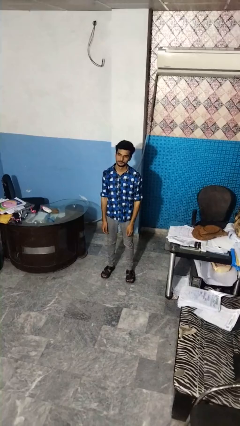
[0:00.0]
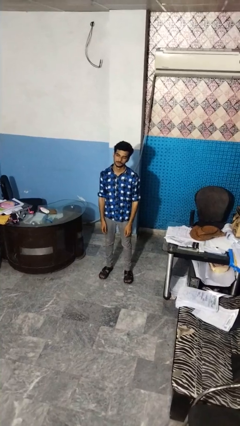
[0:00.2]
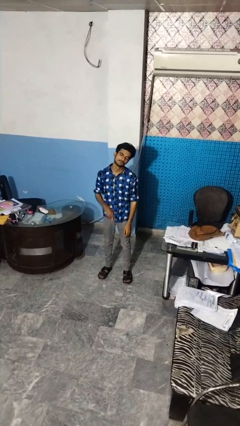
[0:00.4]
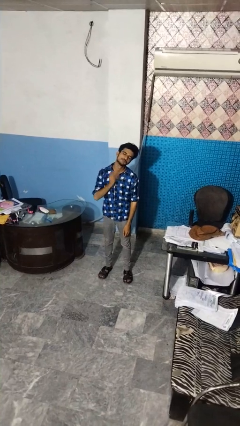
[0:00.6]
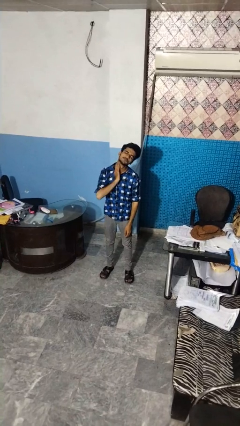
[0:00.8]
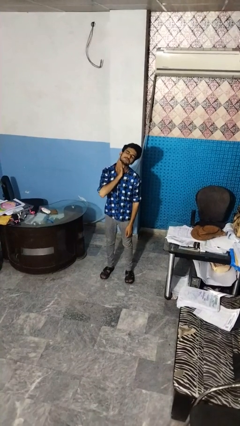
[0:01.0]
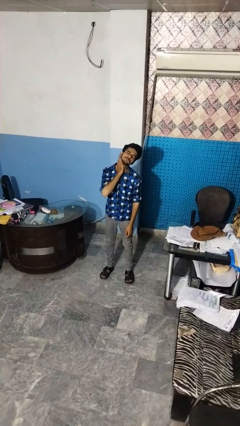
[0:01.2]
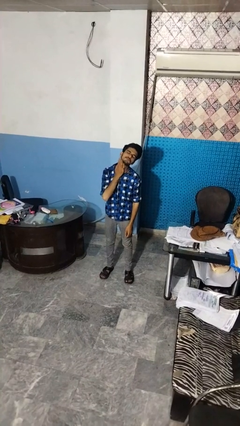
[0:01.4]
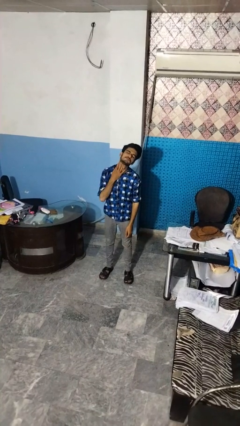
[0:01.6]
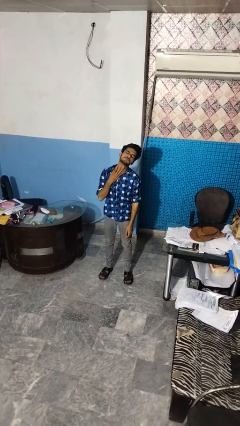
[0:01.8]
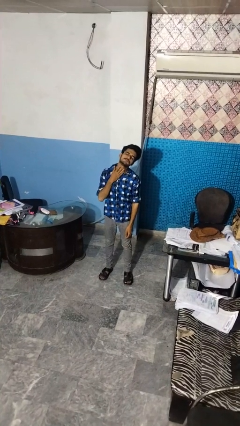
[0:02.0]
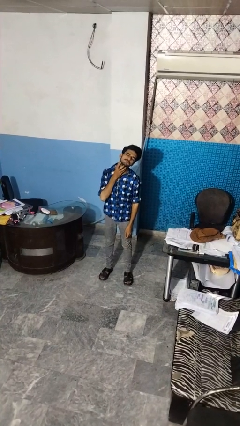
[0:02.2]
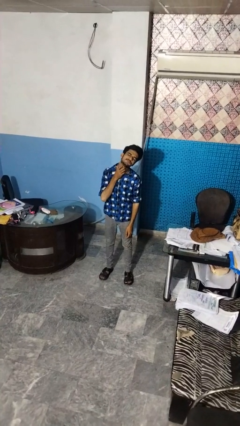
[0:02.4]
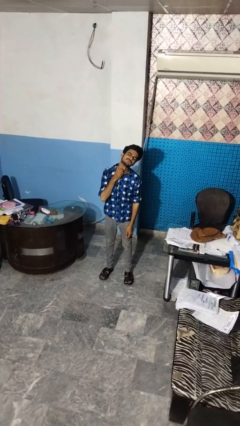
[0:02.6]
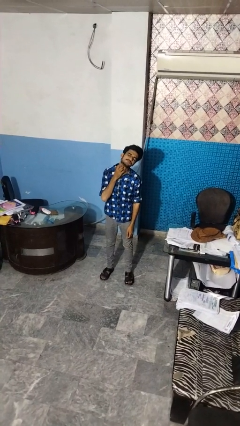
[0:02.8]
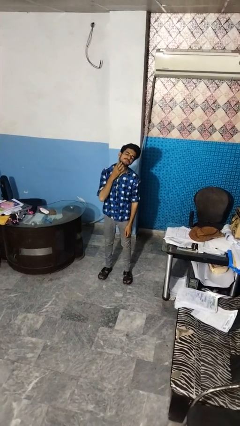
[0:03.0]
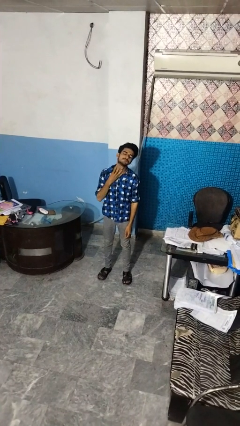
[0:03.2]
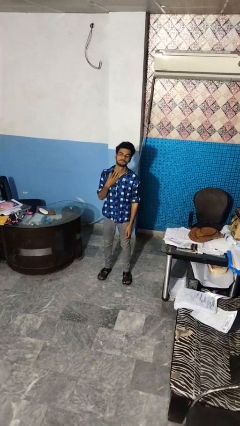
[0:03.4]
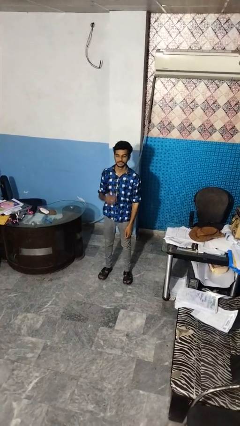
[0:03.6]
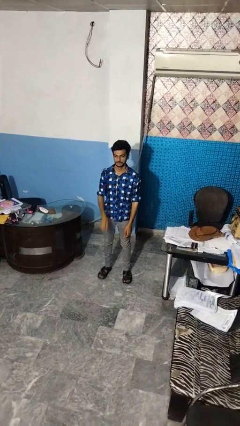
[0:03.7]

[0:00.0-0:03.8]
person rubs neck

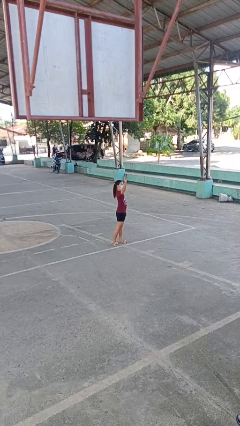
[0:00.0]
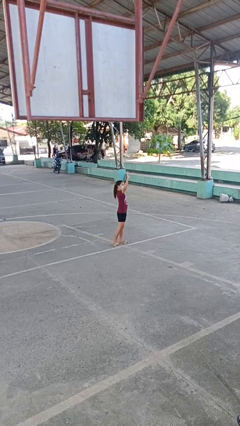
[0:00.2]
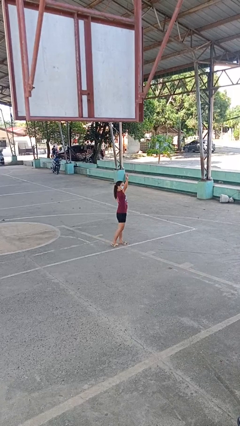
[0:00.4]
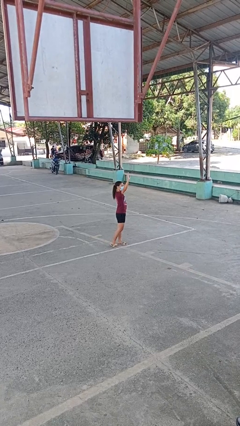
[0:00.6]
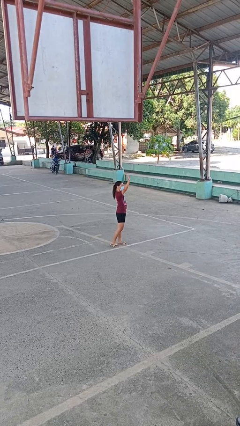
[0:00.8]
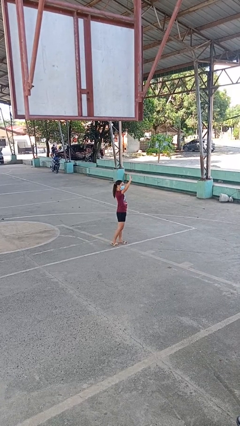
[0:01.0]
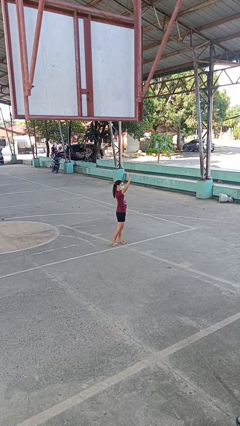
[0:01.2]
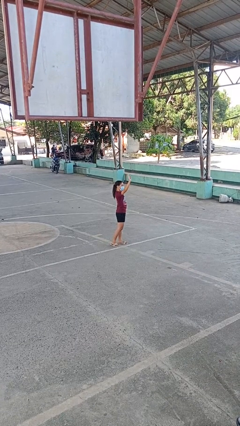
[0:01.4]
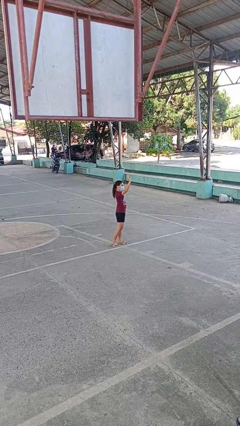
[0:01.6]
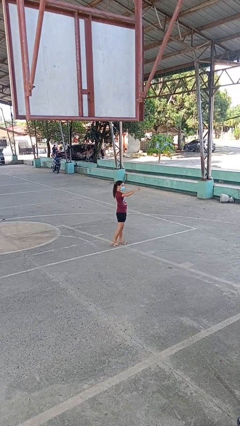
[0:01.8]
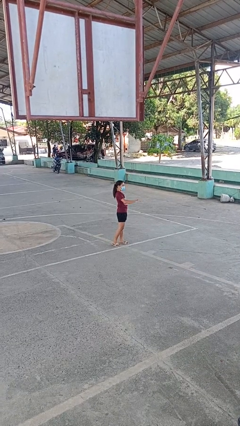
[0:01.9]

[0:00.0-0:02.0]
person waves at person

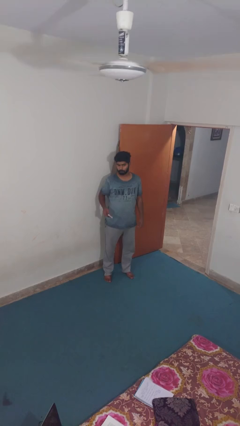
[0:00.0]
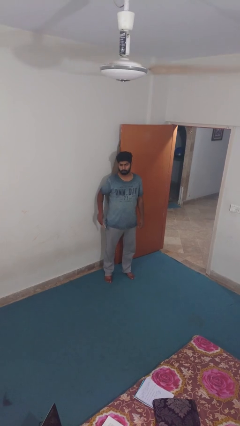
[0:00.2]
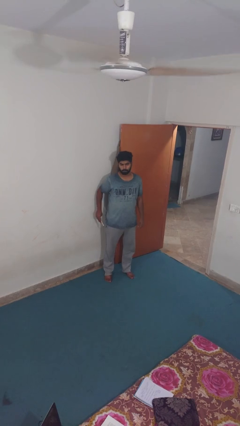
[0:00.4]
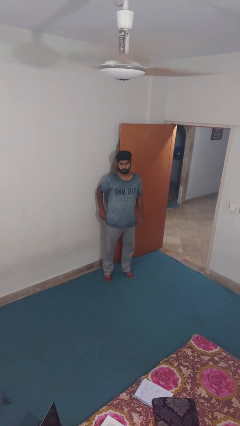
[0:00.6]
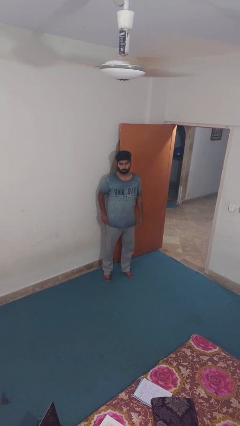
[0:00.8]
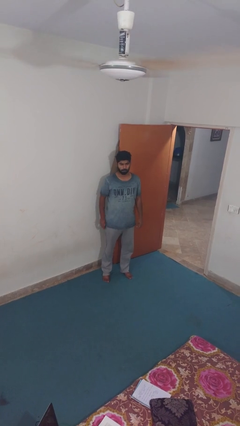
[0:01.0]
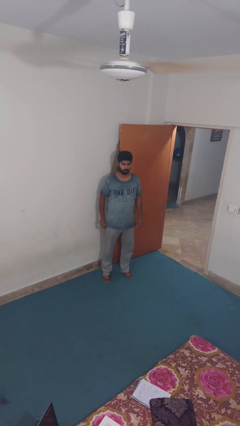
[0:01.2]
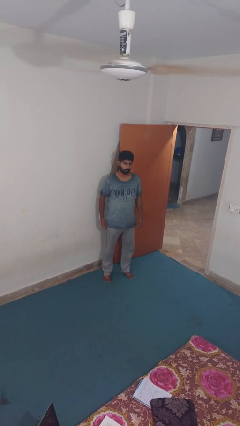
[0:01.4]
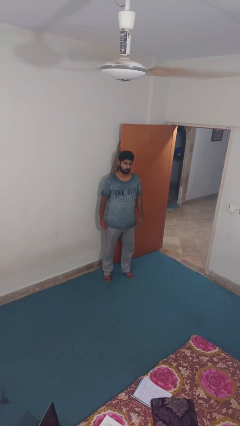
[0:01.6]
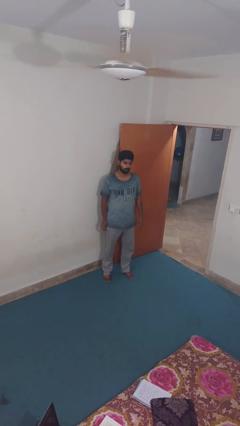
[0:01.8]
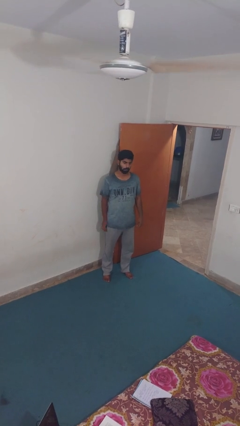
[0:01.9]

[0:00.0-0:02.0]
person puts phone into pocket

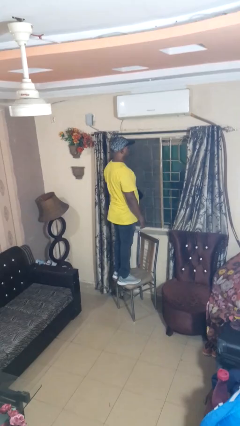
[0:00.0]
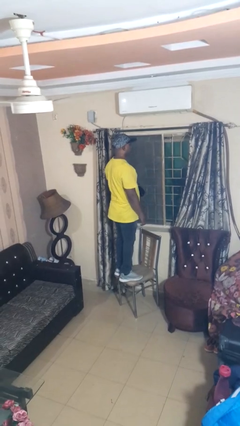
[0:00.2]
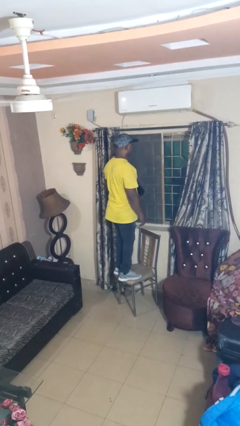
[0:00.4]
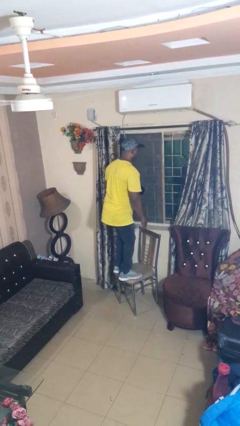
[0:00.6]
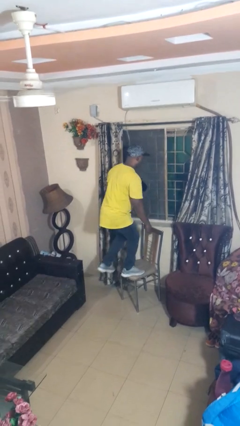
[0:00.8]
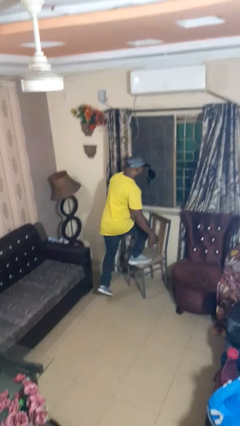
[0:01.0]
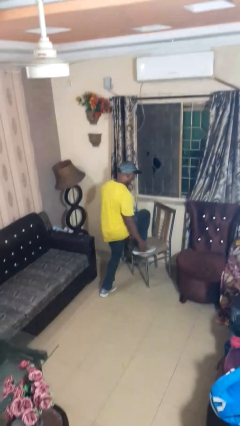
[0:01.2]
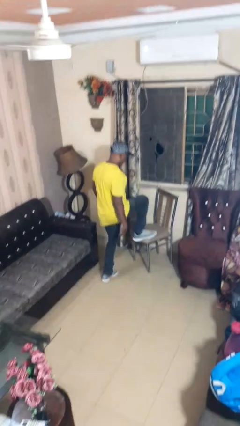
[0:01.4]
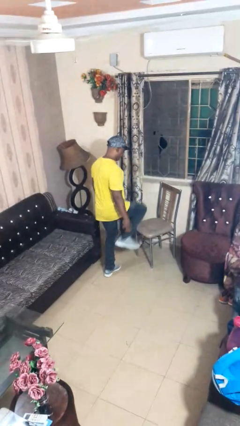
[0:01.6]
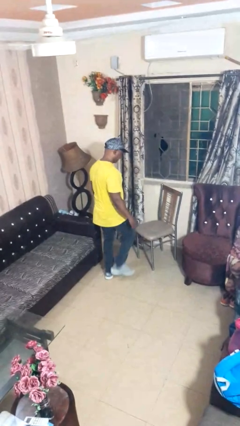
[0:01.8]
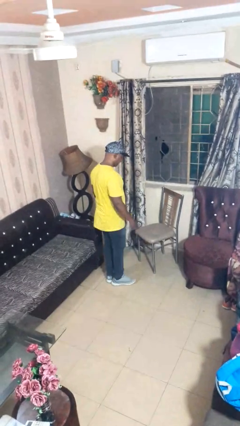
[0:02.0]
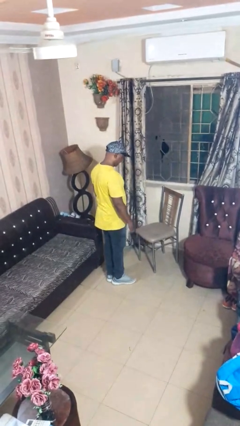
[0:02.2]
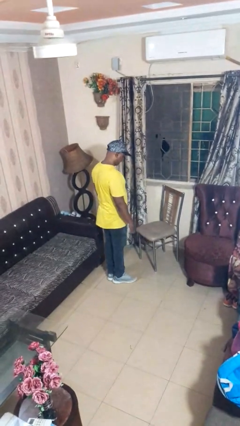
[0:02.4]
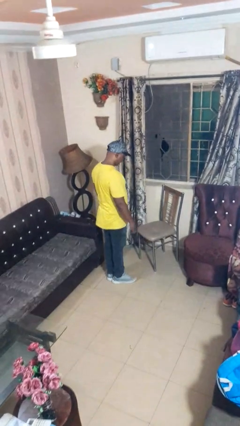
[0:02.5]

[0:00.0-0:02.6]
person climbs off chair

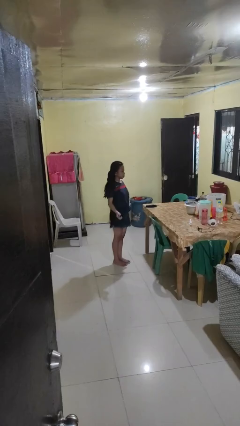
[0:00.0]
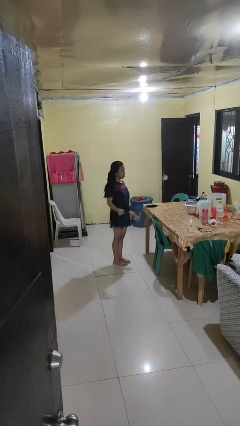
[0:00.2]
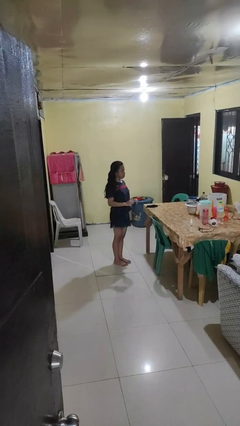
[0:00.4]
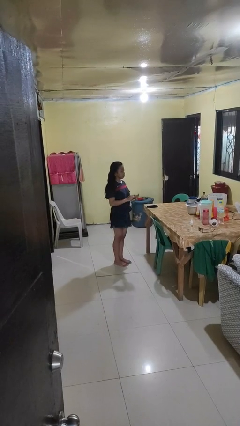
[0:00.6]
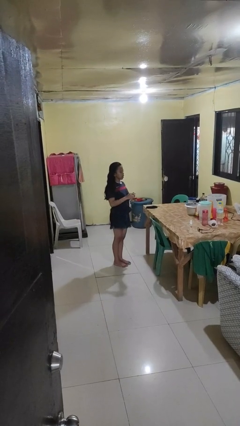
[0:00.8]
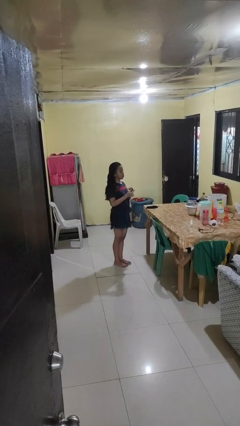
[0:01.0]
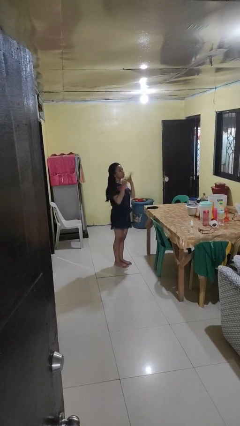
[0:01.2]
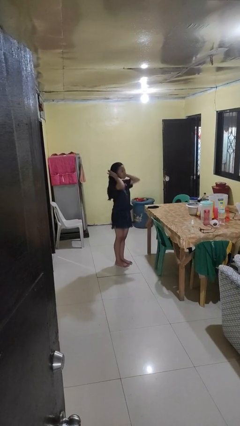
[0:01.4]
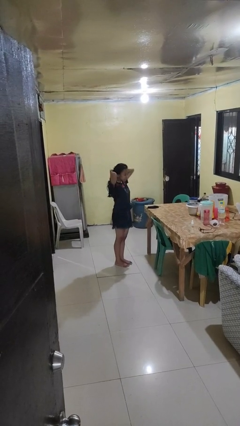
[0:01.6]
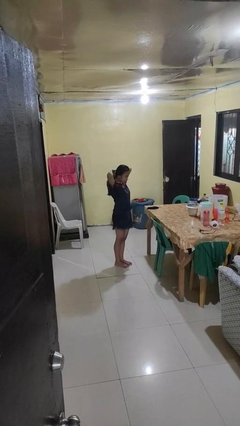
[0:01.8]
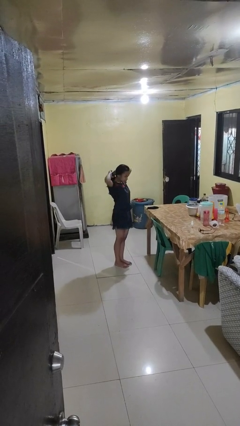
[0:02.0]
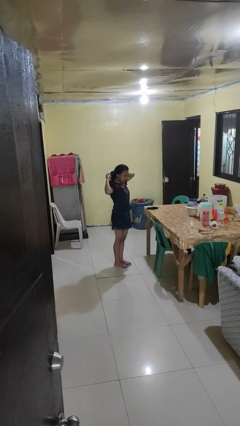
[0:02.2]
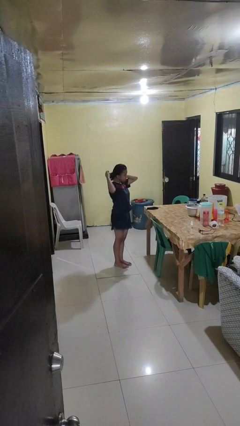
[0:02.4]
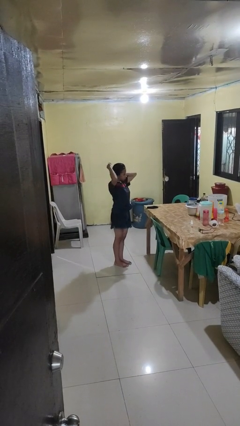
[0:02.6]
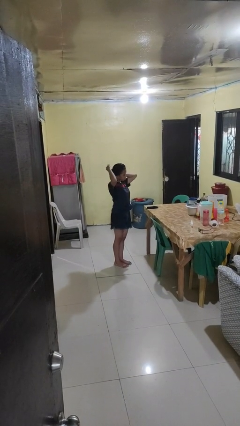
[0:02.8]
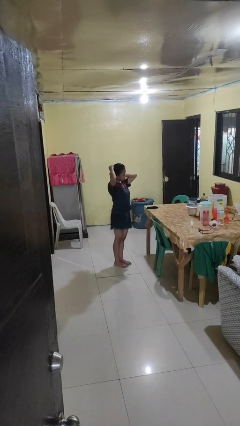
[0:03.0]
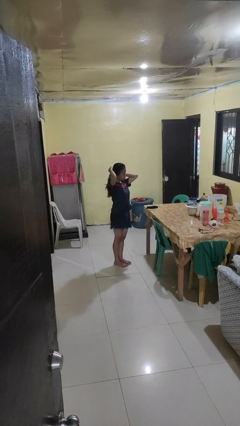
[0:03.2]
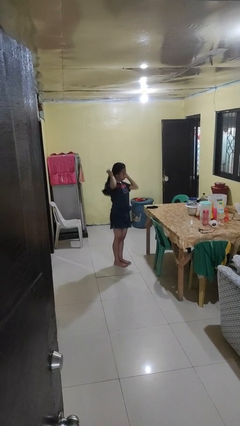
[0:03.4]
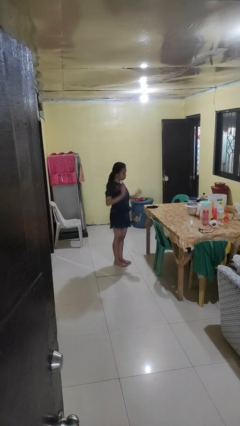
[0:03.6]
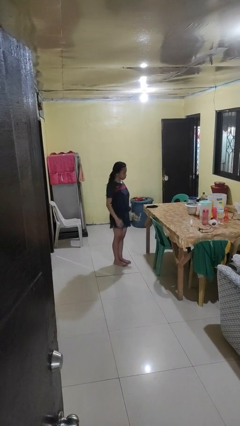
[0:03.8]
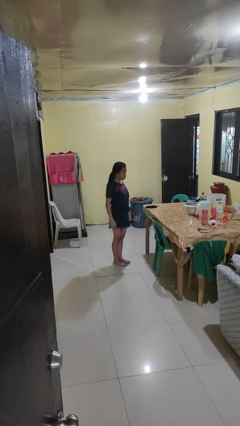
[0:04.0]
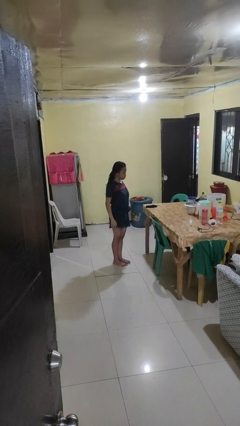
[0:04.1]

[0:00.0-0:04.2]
person puts hair in ponytail

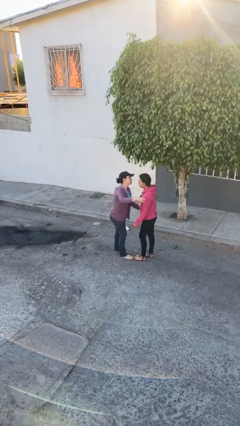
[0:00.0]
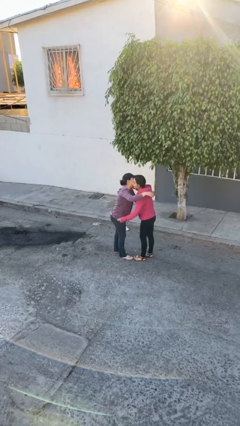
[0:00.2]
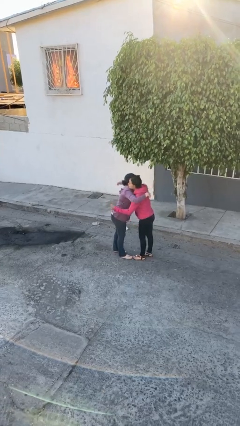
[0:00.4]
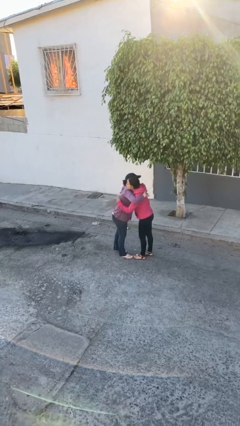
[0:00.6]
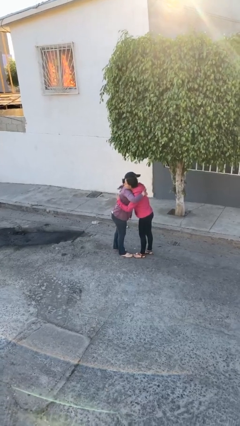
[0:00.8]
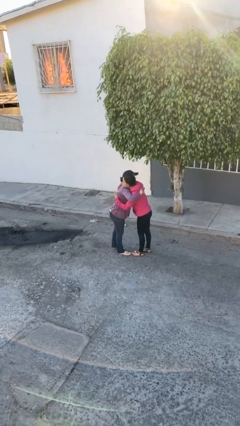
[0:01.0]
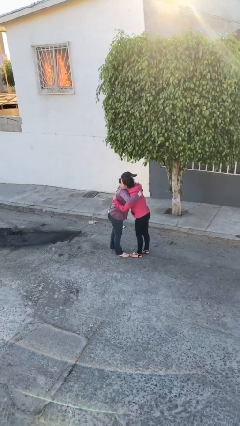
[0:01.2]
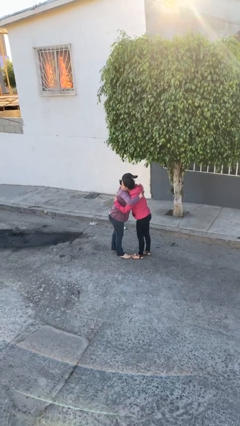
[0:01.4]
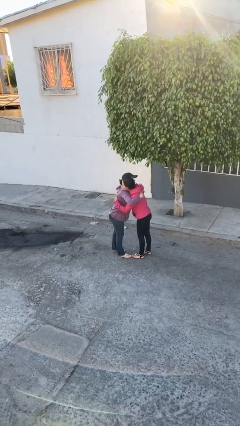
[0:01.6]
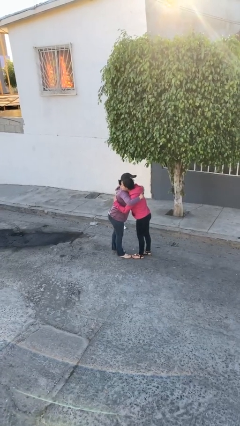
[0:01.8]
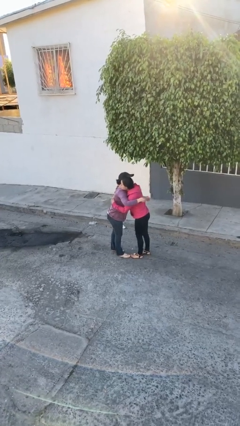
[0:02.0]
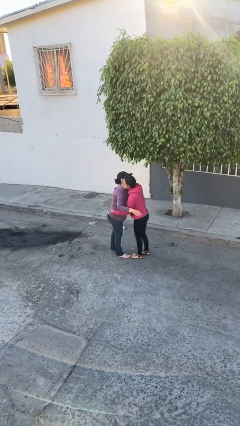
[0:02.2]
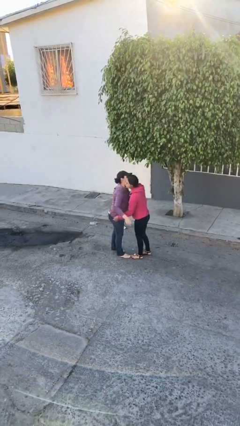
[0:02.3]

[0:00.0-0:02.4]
person embraces person

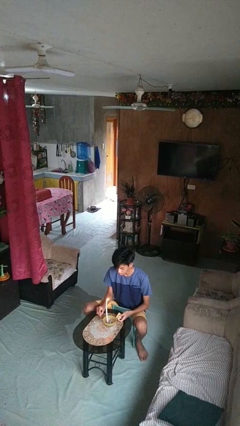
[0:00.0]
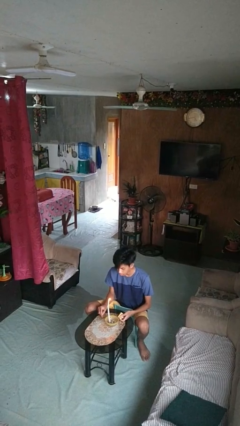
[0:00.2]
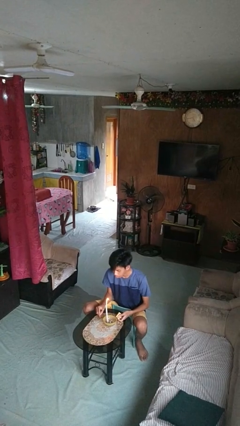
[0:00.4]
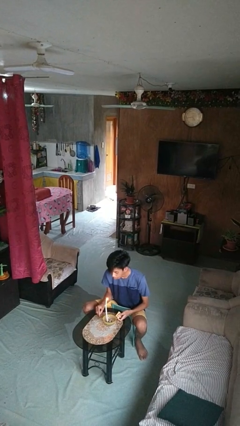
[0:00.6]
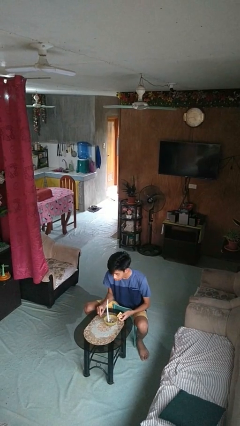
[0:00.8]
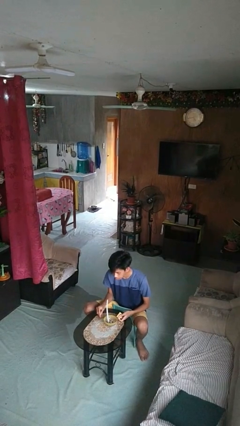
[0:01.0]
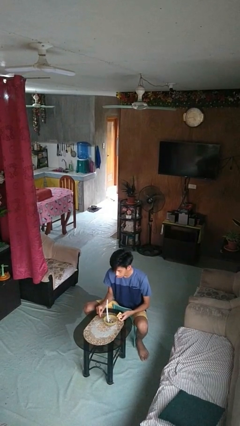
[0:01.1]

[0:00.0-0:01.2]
person extinguishes candle
